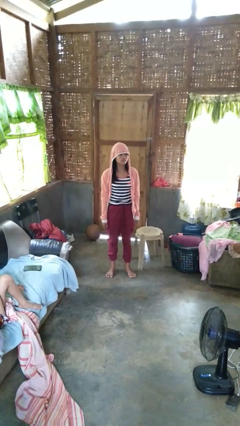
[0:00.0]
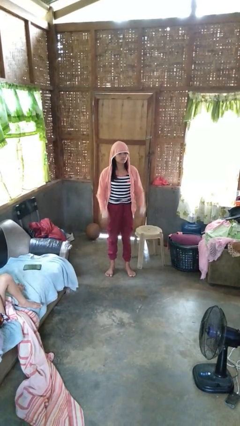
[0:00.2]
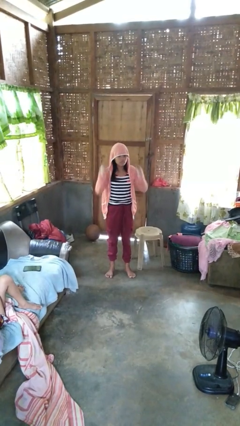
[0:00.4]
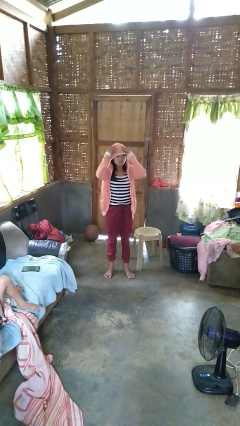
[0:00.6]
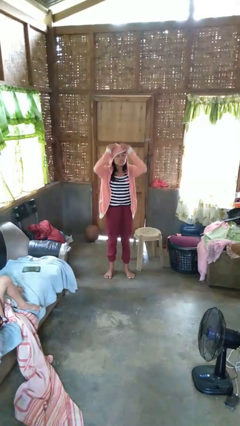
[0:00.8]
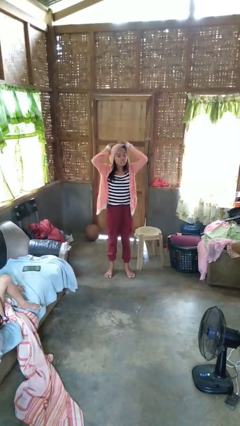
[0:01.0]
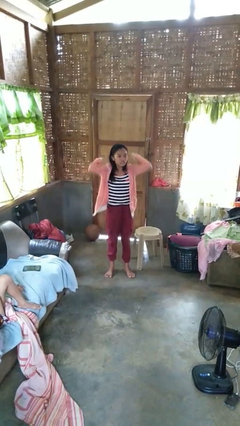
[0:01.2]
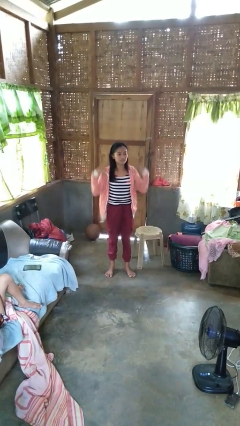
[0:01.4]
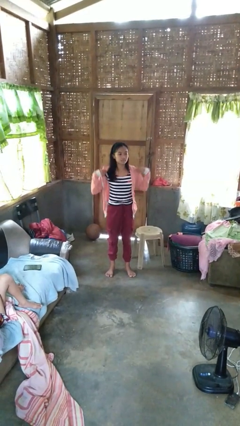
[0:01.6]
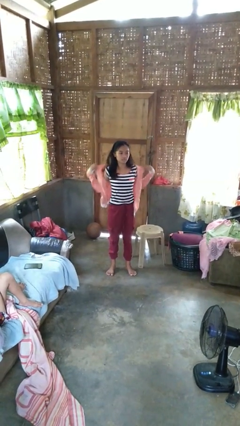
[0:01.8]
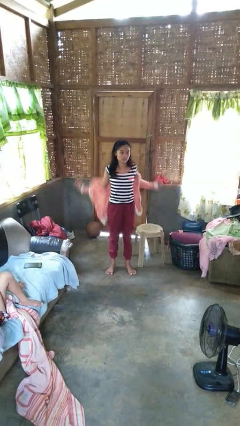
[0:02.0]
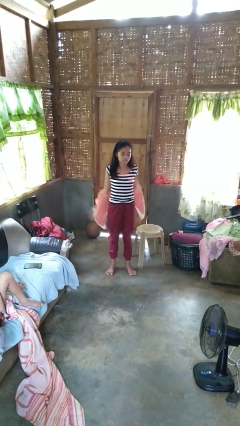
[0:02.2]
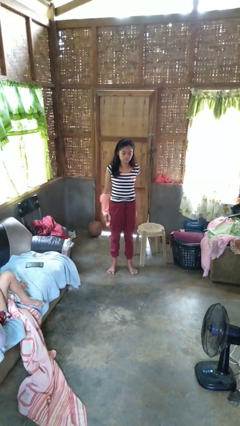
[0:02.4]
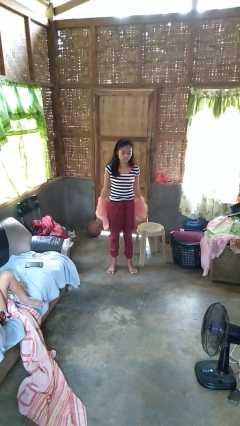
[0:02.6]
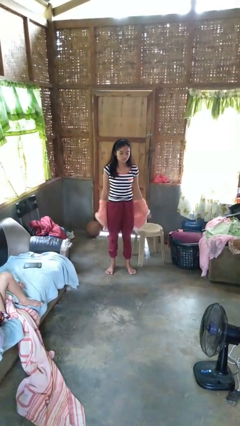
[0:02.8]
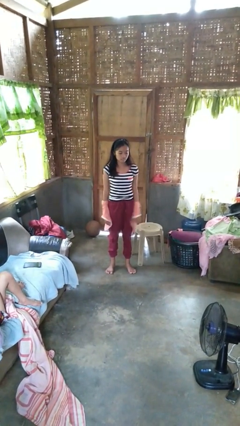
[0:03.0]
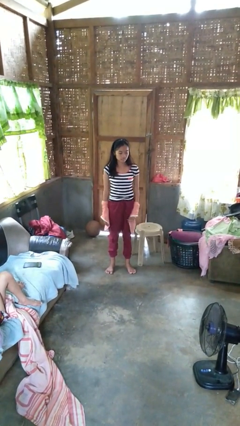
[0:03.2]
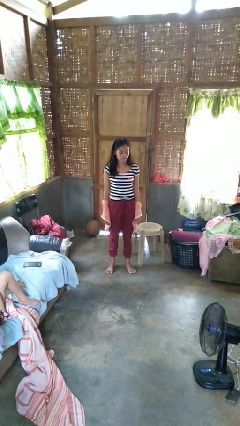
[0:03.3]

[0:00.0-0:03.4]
person takes off hoodie

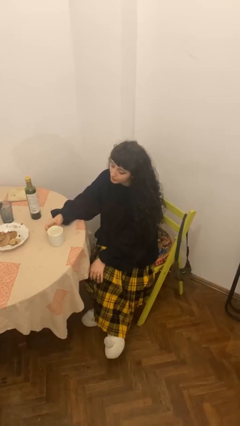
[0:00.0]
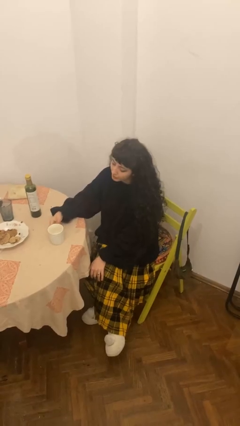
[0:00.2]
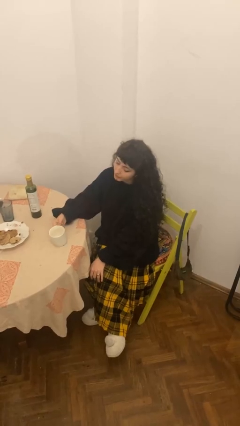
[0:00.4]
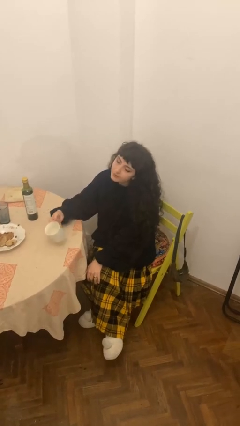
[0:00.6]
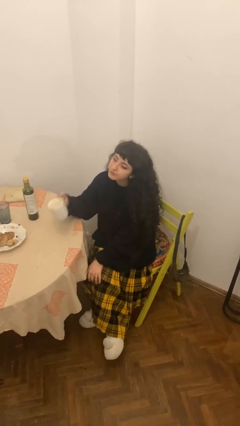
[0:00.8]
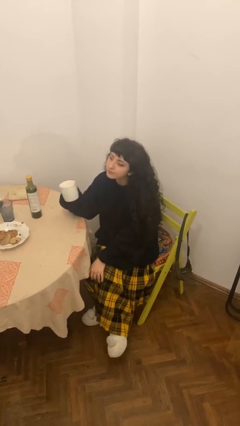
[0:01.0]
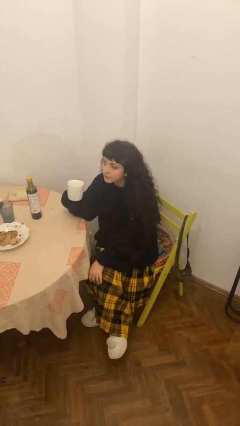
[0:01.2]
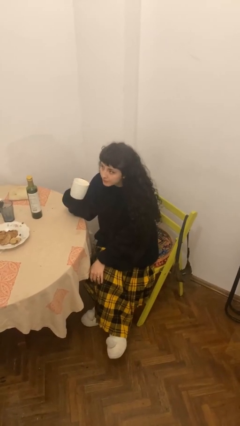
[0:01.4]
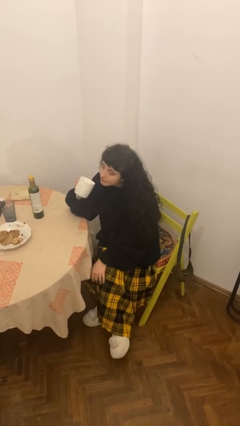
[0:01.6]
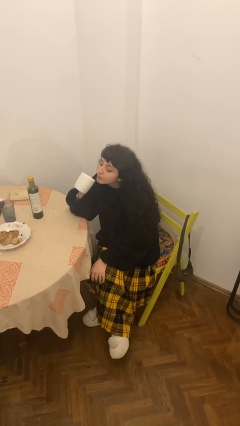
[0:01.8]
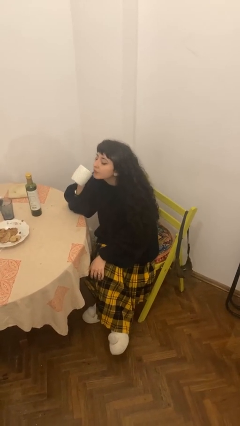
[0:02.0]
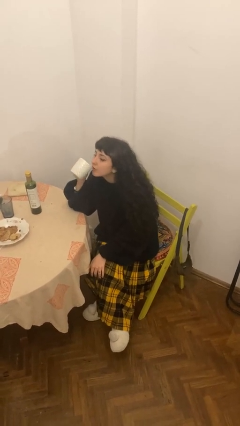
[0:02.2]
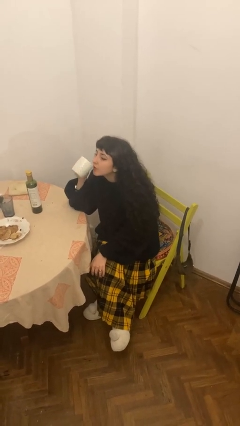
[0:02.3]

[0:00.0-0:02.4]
person picks up object from table

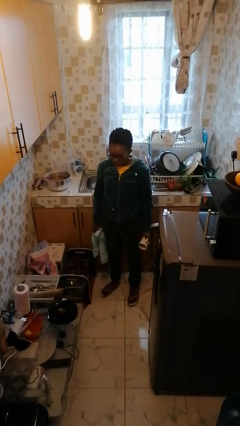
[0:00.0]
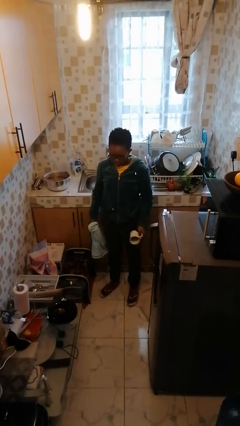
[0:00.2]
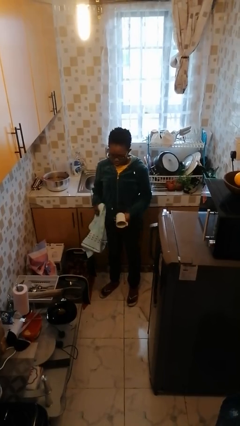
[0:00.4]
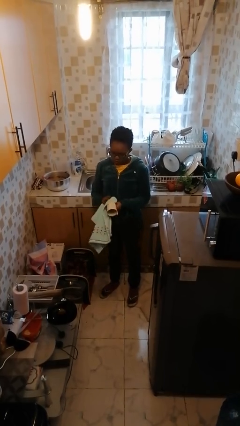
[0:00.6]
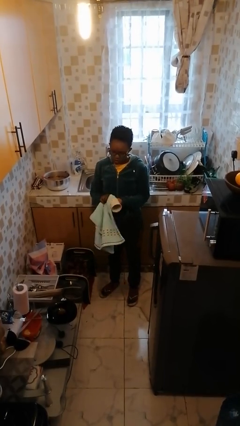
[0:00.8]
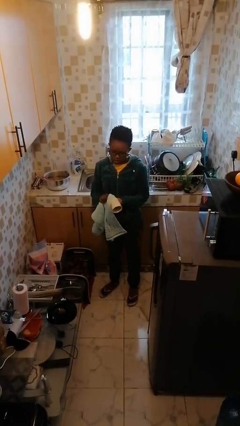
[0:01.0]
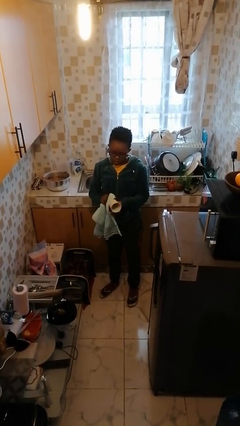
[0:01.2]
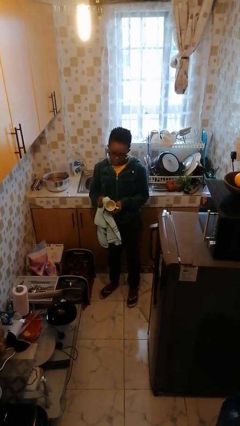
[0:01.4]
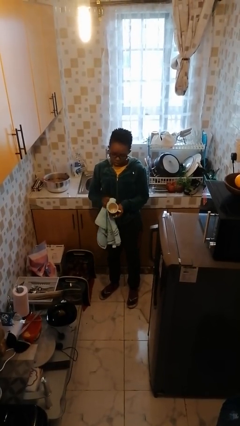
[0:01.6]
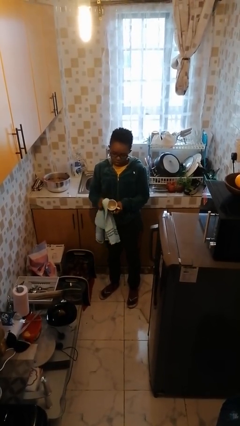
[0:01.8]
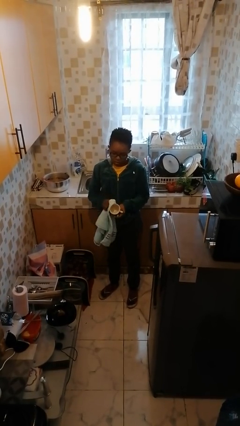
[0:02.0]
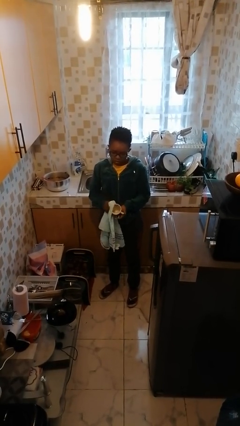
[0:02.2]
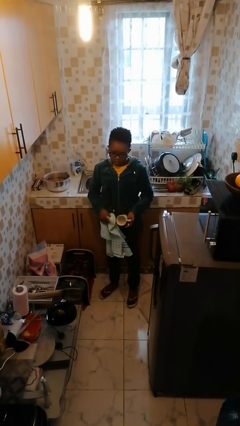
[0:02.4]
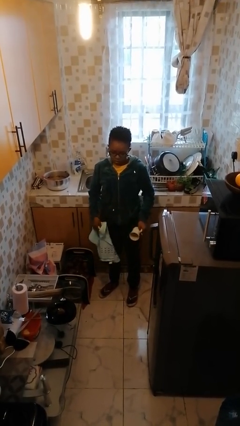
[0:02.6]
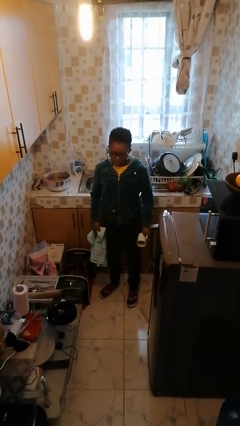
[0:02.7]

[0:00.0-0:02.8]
person dries dish

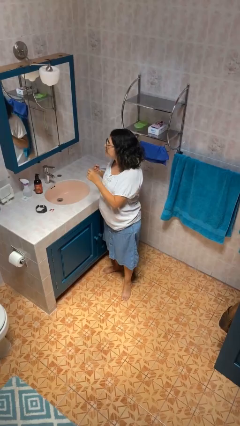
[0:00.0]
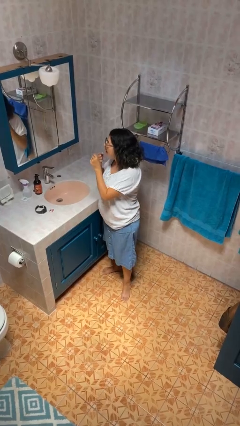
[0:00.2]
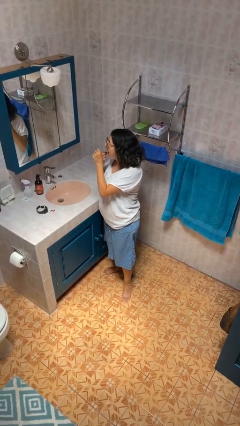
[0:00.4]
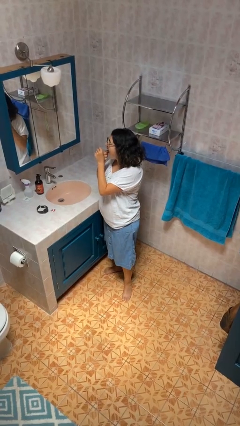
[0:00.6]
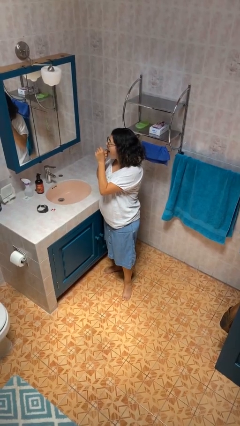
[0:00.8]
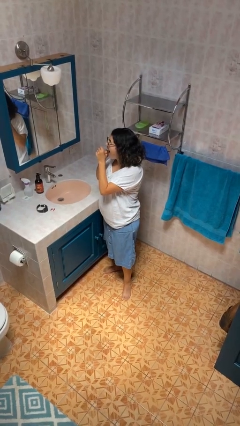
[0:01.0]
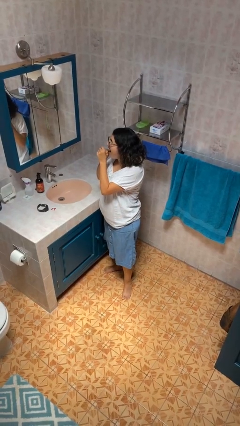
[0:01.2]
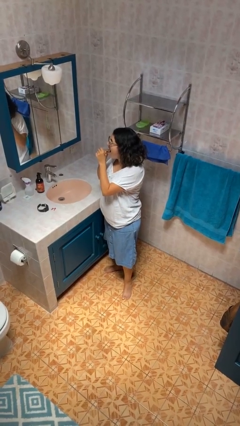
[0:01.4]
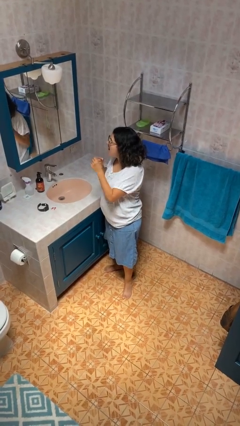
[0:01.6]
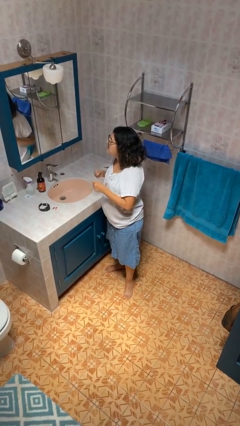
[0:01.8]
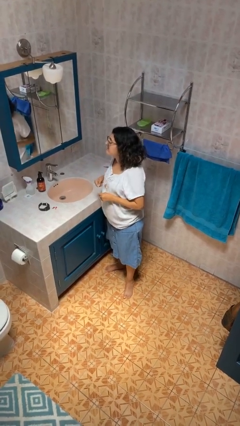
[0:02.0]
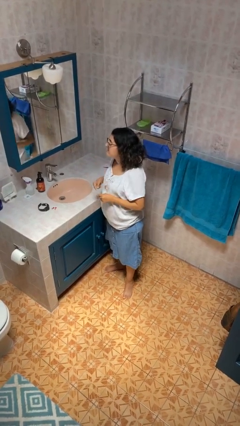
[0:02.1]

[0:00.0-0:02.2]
person flosses

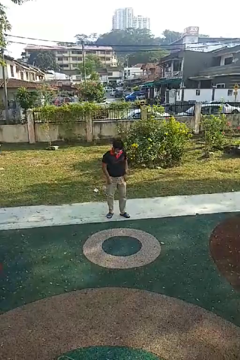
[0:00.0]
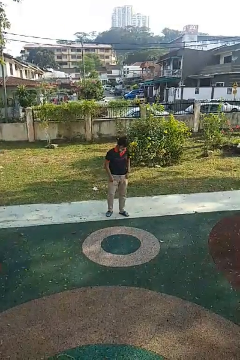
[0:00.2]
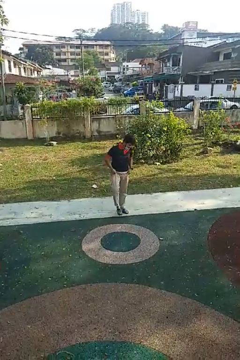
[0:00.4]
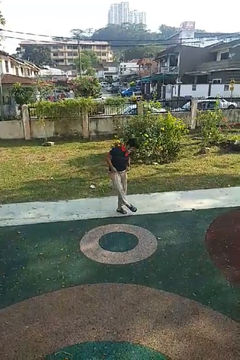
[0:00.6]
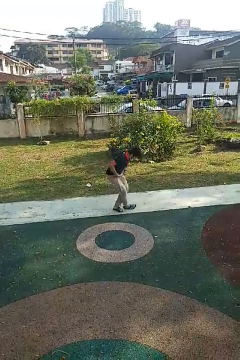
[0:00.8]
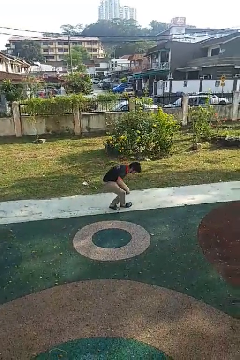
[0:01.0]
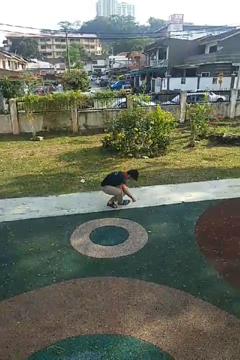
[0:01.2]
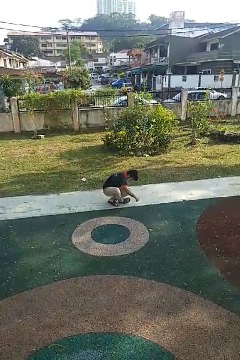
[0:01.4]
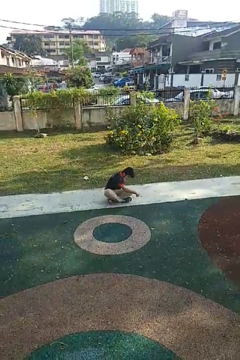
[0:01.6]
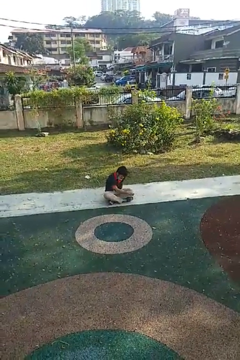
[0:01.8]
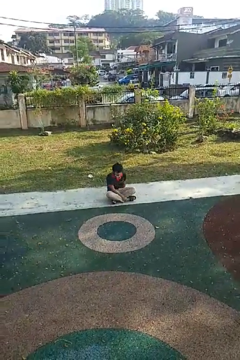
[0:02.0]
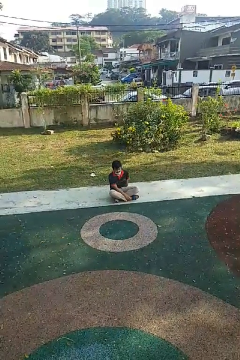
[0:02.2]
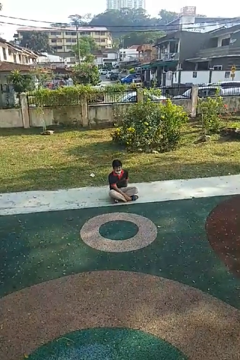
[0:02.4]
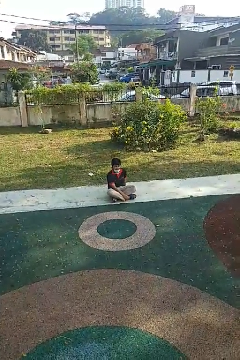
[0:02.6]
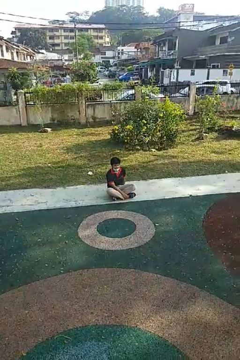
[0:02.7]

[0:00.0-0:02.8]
person sits crisscross

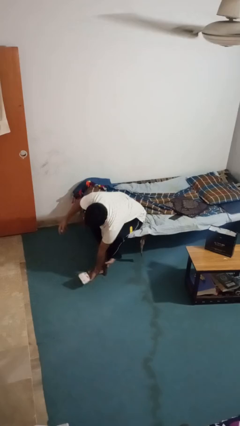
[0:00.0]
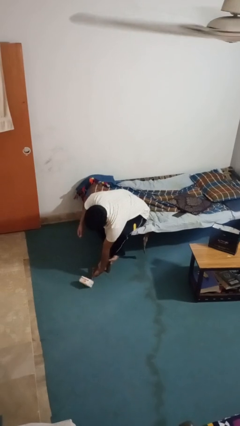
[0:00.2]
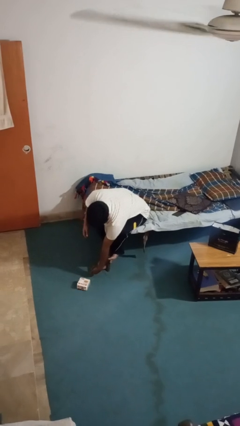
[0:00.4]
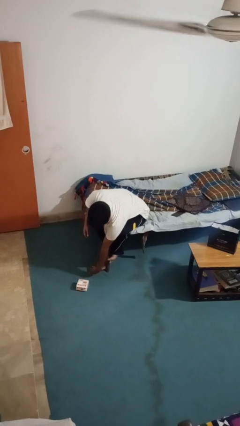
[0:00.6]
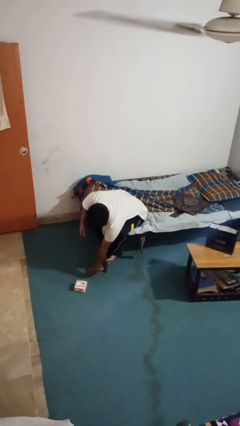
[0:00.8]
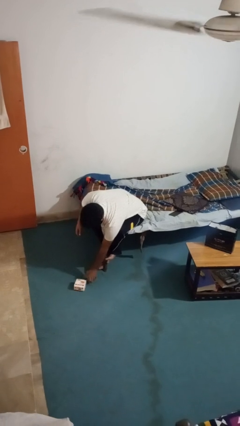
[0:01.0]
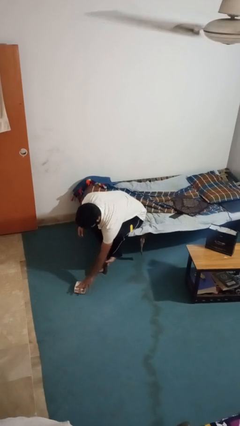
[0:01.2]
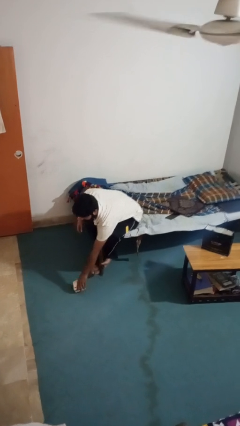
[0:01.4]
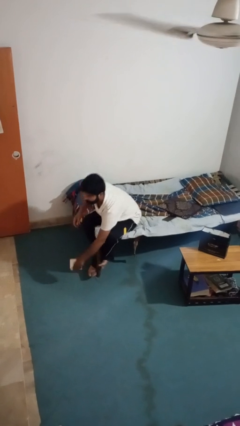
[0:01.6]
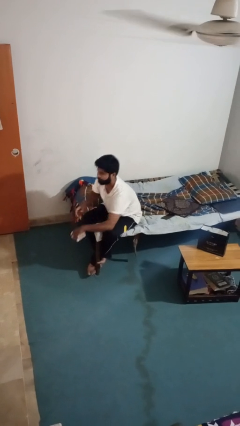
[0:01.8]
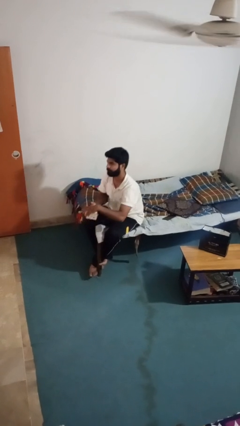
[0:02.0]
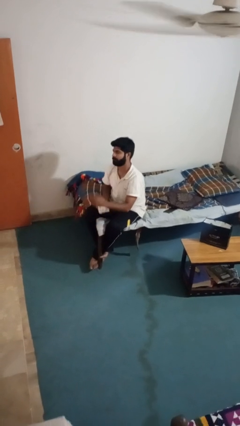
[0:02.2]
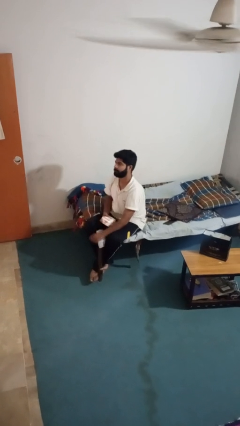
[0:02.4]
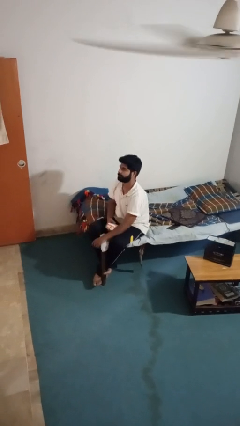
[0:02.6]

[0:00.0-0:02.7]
person picks up object from floor

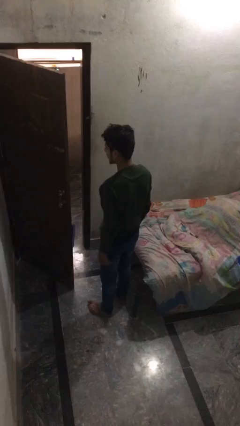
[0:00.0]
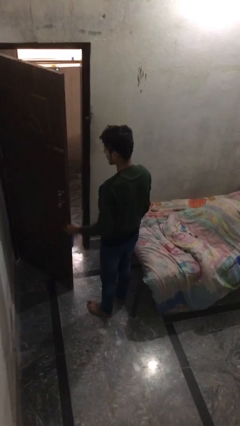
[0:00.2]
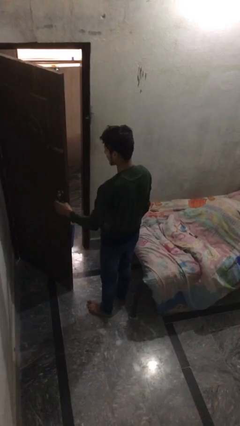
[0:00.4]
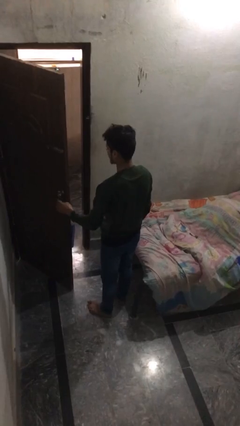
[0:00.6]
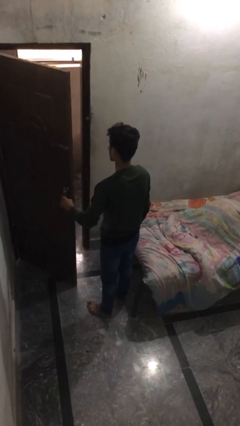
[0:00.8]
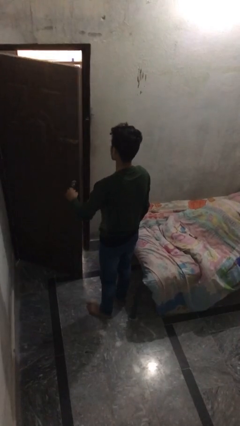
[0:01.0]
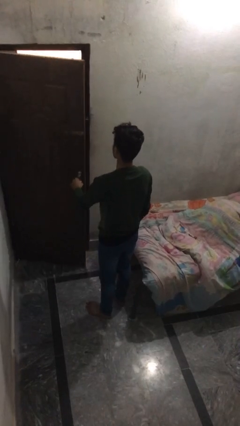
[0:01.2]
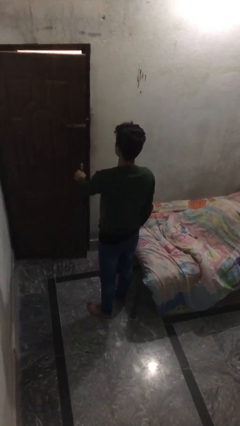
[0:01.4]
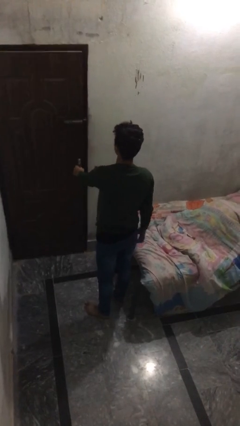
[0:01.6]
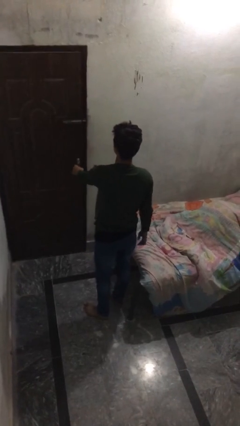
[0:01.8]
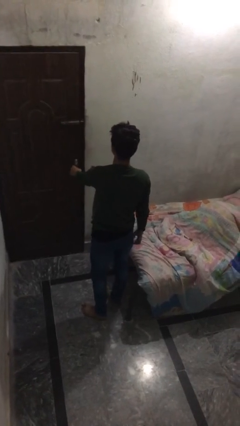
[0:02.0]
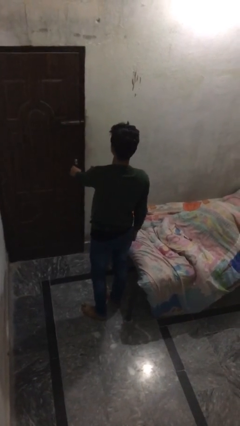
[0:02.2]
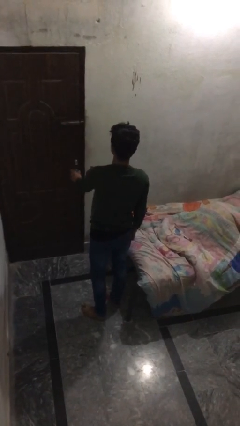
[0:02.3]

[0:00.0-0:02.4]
person closes facility door
